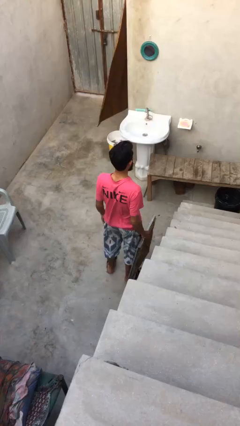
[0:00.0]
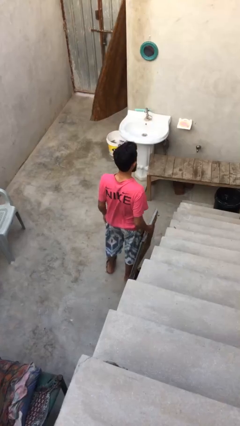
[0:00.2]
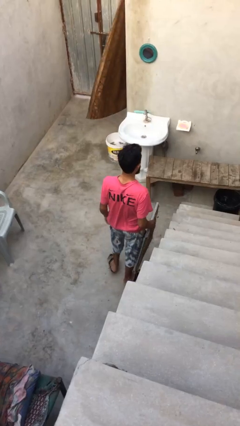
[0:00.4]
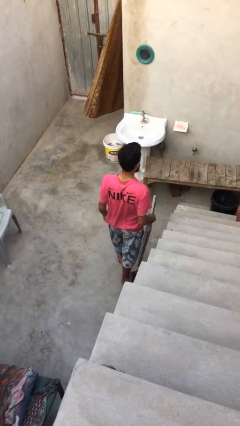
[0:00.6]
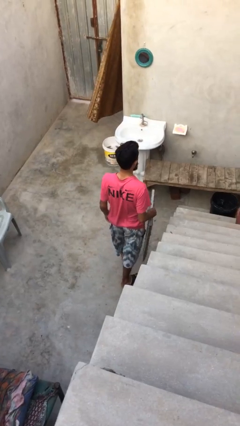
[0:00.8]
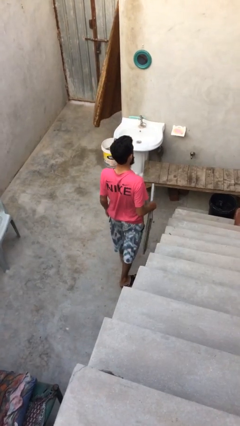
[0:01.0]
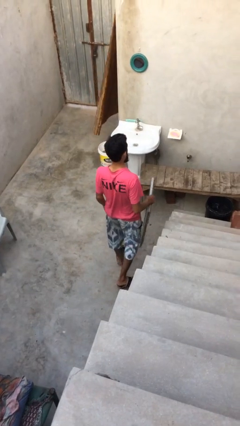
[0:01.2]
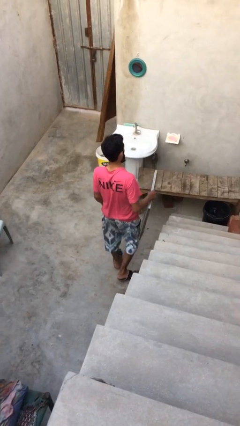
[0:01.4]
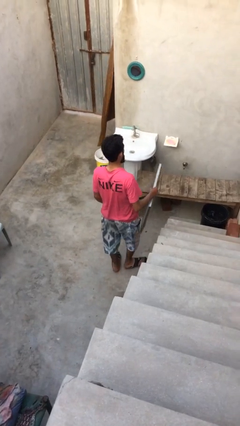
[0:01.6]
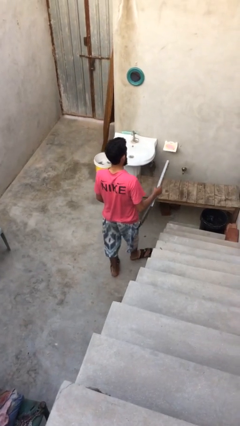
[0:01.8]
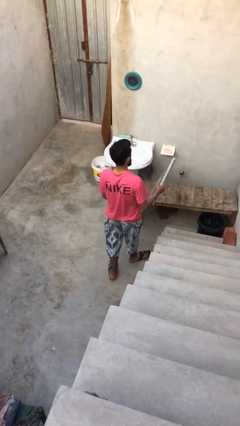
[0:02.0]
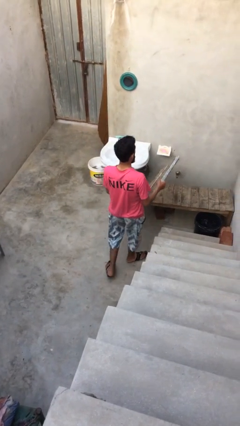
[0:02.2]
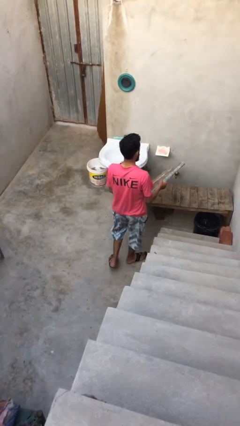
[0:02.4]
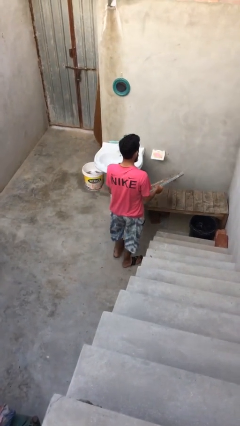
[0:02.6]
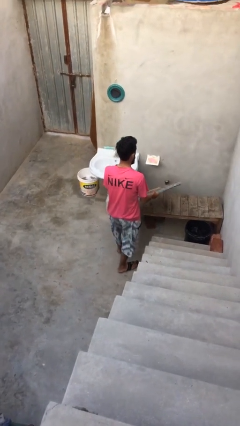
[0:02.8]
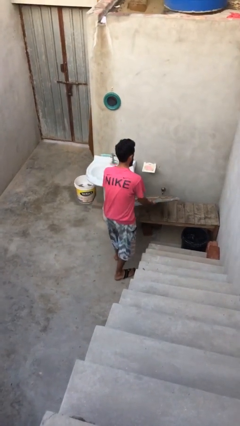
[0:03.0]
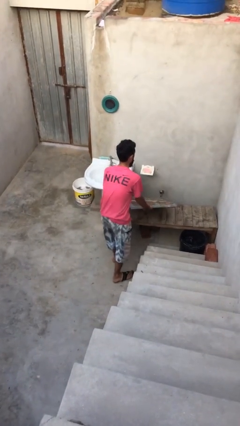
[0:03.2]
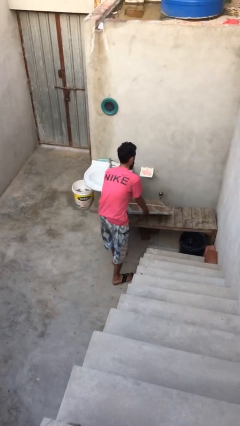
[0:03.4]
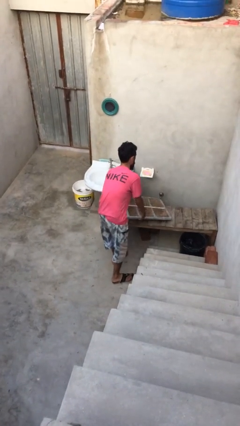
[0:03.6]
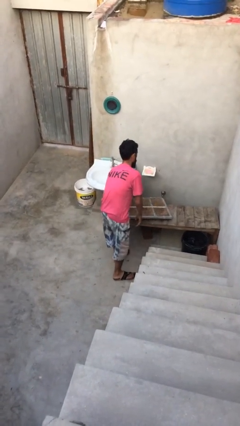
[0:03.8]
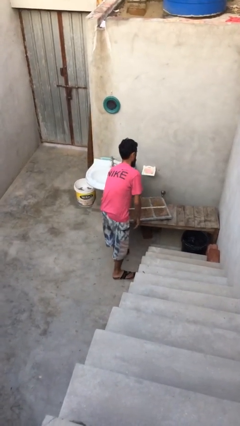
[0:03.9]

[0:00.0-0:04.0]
person puts down object on table

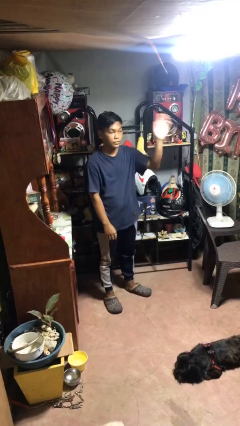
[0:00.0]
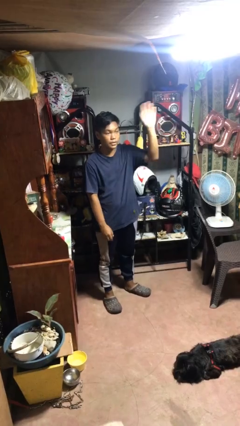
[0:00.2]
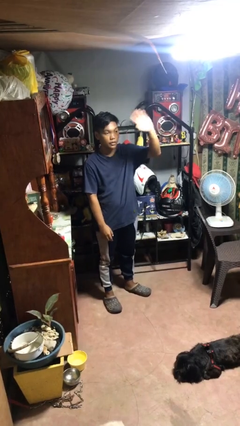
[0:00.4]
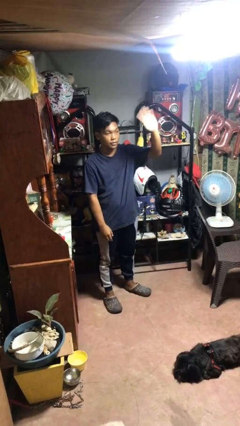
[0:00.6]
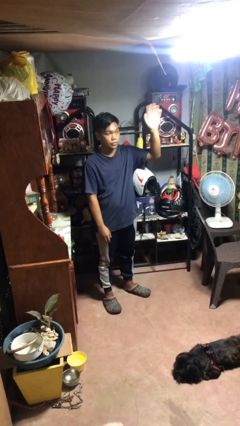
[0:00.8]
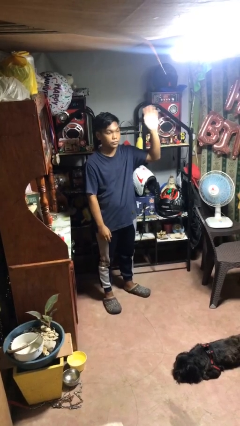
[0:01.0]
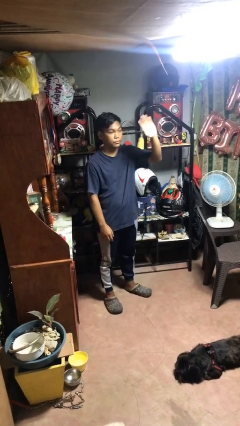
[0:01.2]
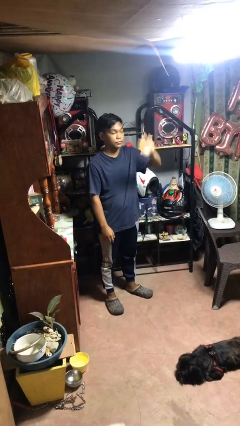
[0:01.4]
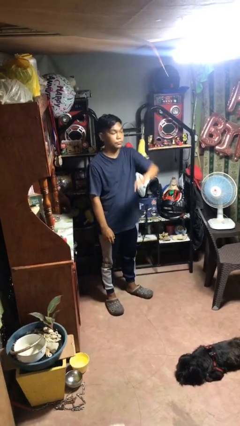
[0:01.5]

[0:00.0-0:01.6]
person waves at person

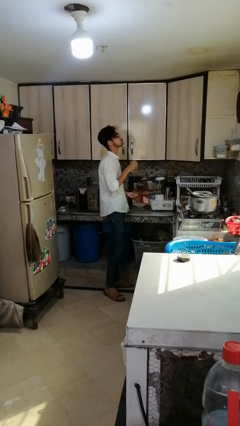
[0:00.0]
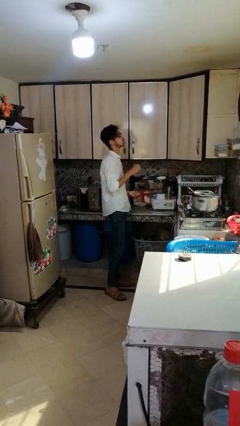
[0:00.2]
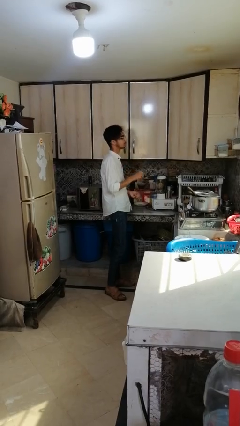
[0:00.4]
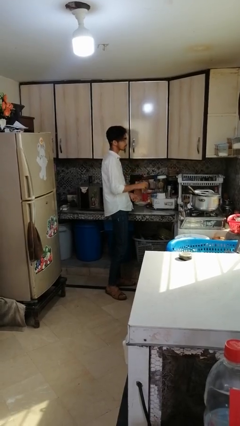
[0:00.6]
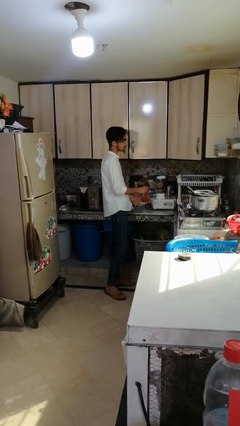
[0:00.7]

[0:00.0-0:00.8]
person drinks from cup

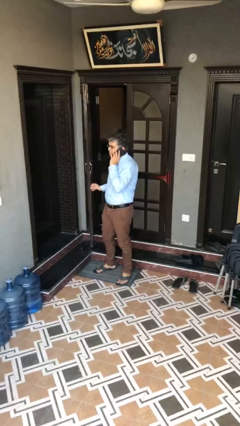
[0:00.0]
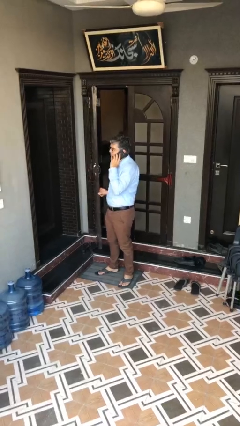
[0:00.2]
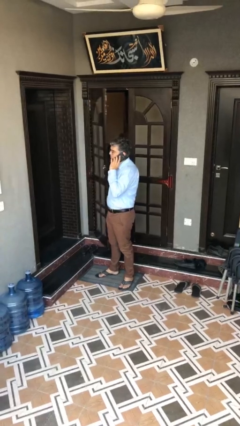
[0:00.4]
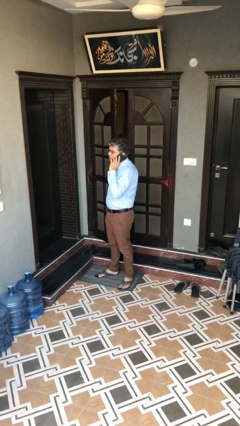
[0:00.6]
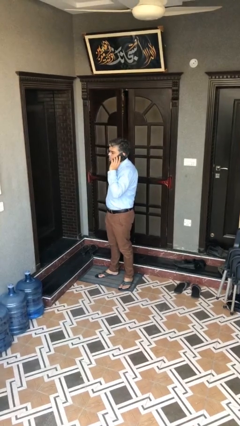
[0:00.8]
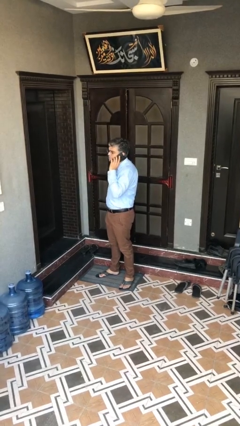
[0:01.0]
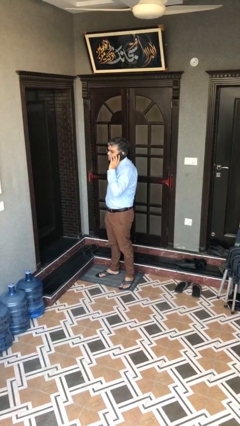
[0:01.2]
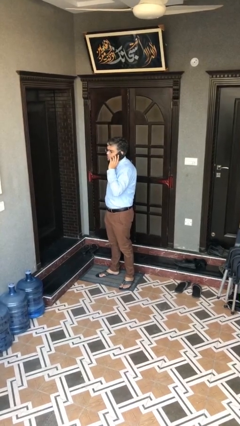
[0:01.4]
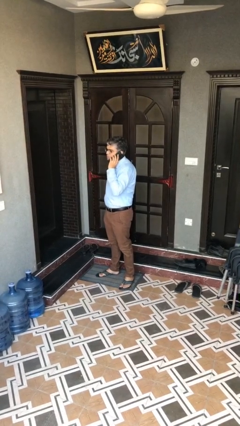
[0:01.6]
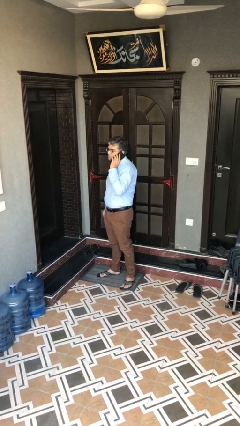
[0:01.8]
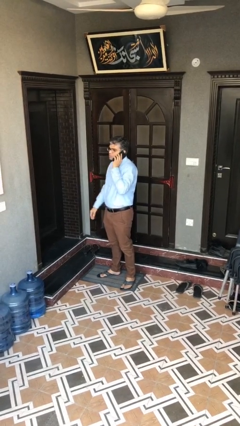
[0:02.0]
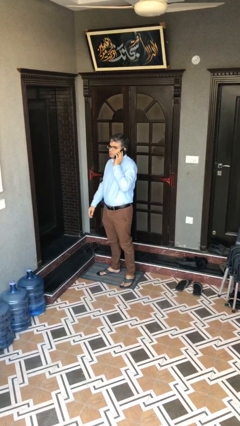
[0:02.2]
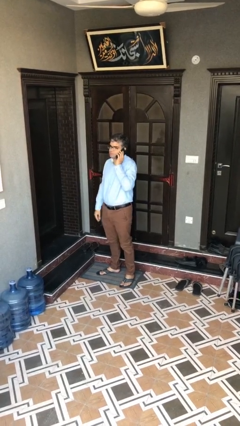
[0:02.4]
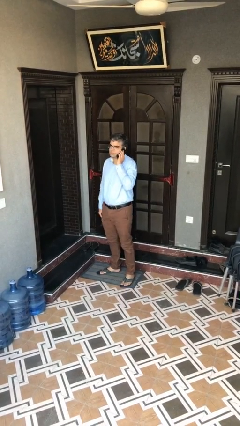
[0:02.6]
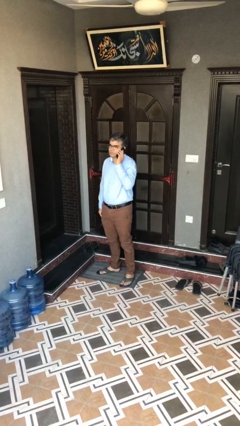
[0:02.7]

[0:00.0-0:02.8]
person closes facility door

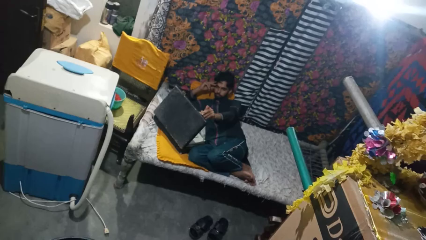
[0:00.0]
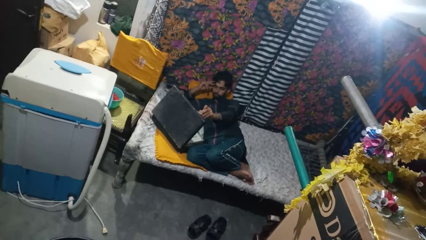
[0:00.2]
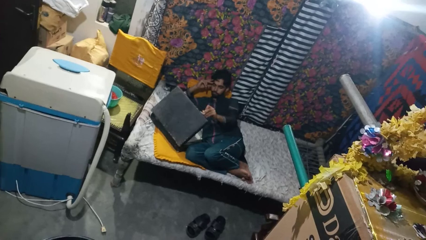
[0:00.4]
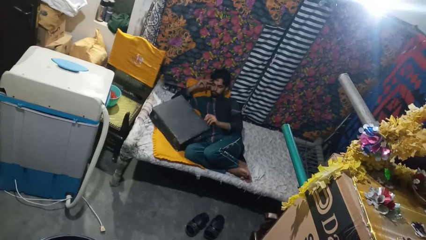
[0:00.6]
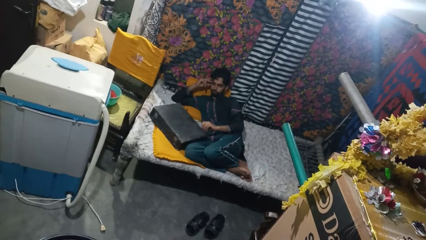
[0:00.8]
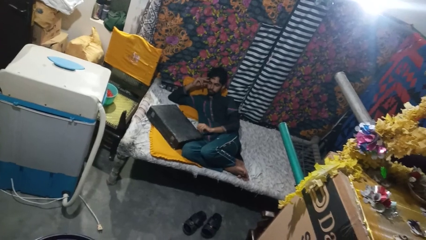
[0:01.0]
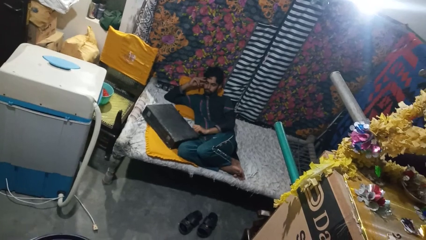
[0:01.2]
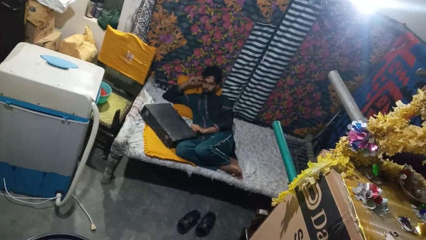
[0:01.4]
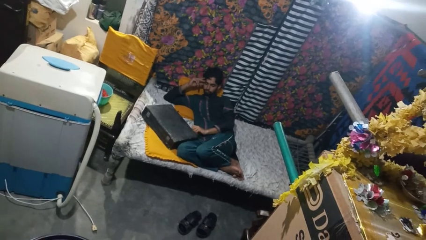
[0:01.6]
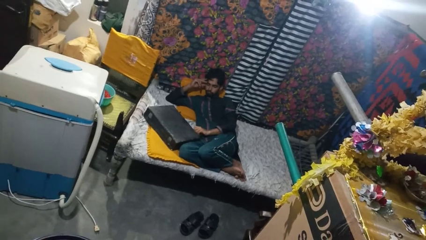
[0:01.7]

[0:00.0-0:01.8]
person closes suitcase

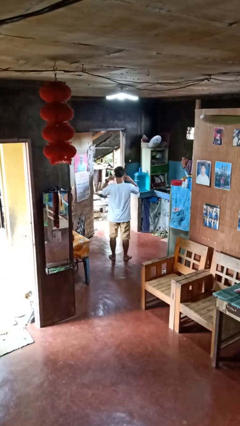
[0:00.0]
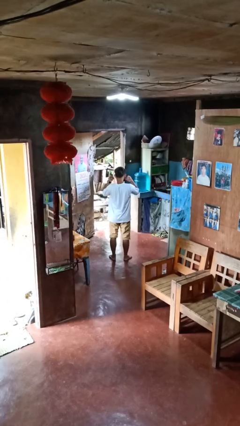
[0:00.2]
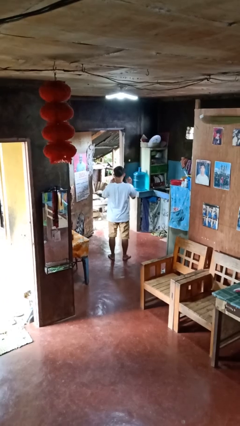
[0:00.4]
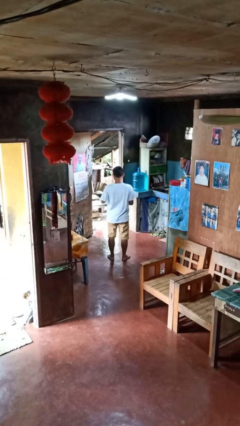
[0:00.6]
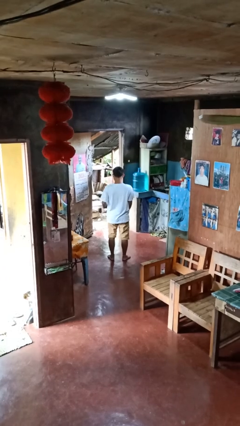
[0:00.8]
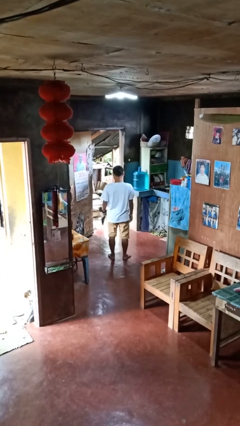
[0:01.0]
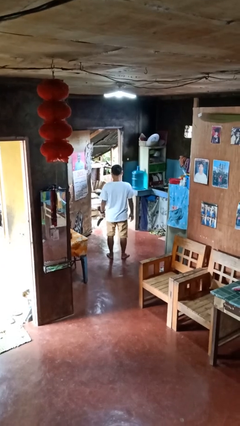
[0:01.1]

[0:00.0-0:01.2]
person takes off facemask

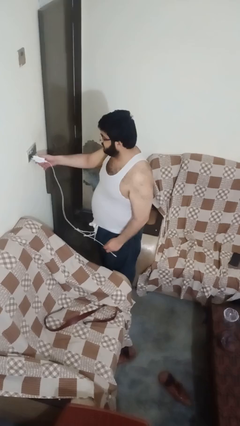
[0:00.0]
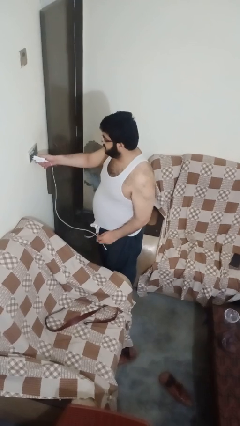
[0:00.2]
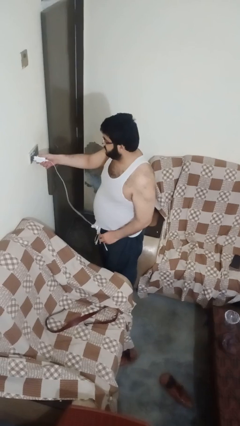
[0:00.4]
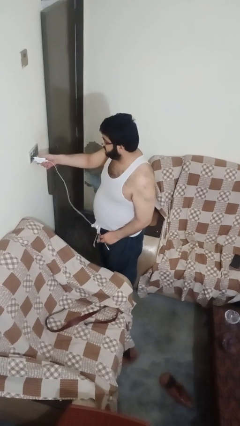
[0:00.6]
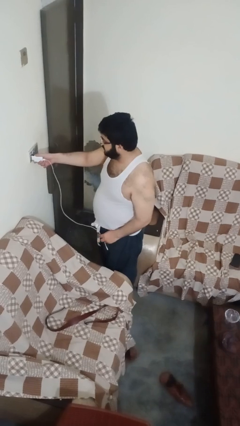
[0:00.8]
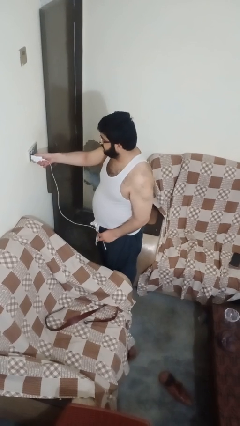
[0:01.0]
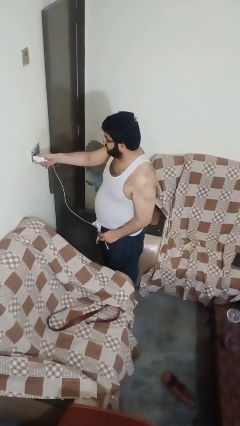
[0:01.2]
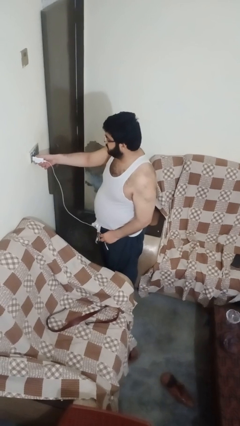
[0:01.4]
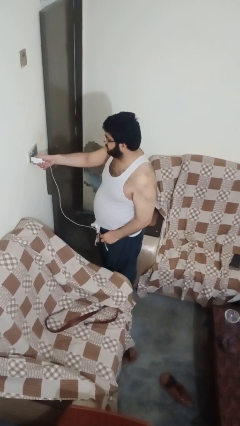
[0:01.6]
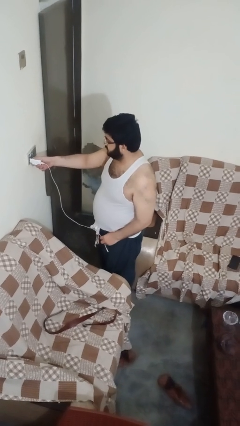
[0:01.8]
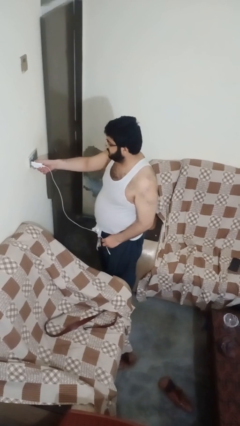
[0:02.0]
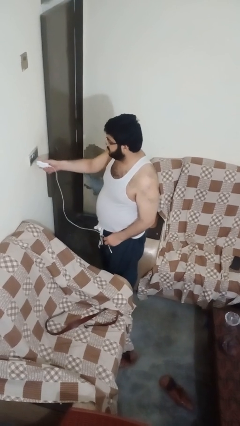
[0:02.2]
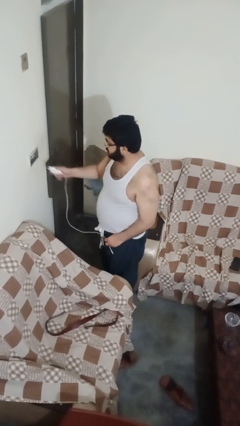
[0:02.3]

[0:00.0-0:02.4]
person plugs into electrical socket

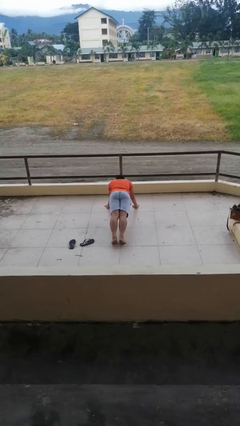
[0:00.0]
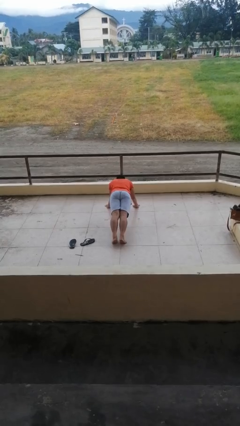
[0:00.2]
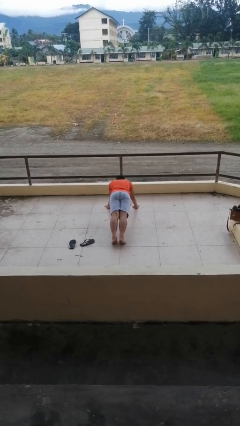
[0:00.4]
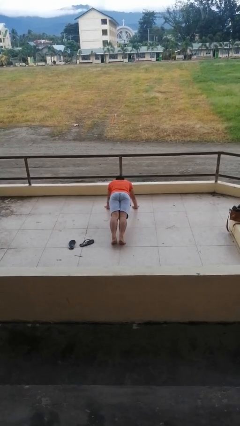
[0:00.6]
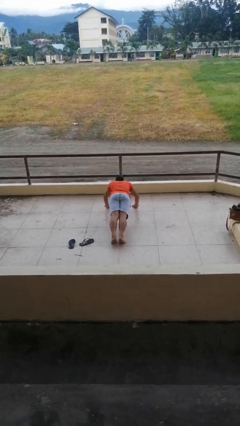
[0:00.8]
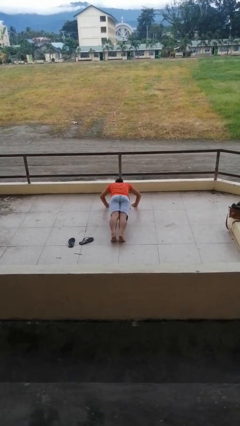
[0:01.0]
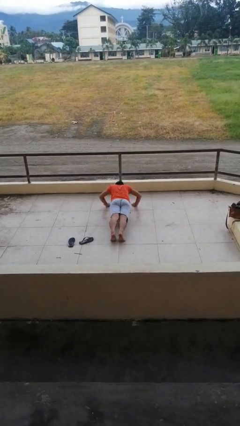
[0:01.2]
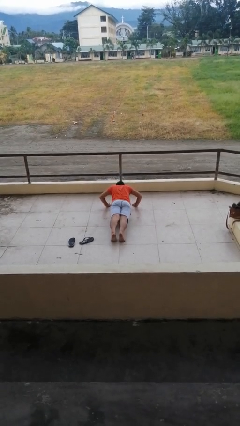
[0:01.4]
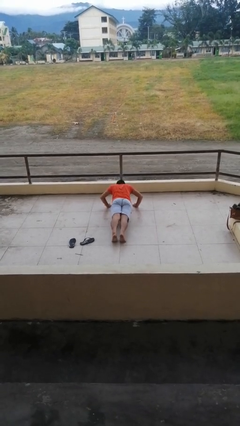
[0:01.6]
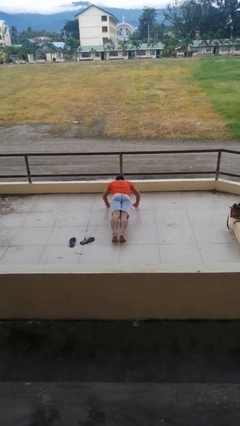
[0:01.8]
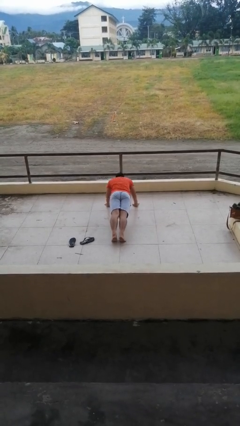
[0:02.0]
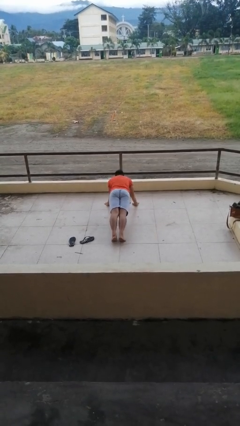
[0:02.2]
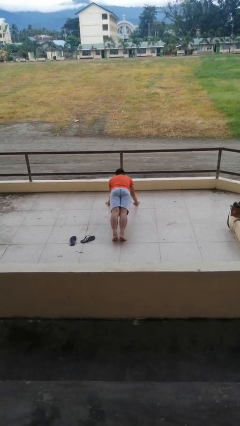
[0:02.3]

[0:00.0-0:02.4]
person exercises with pushup
